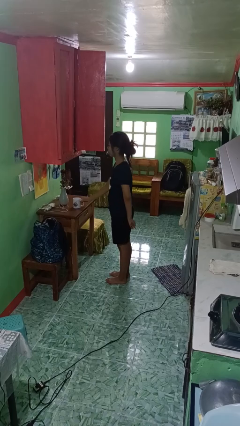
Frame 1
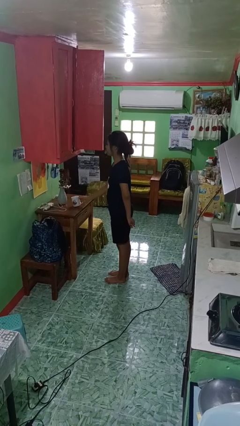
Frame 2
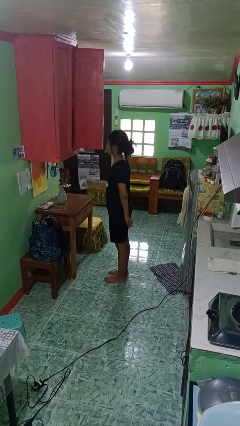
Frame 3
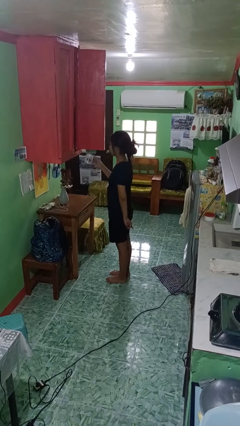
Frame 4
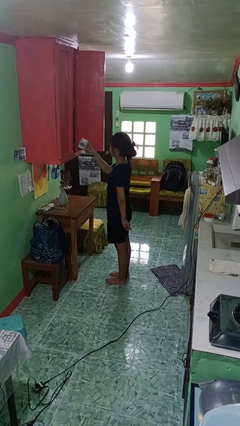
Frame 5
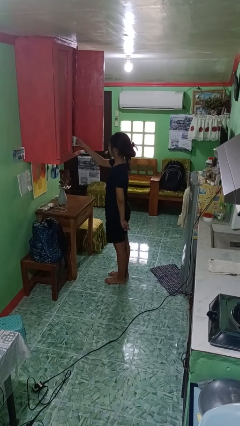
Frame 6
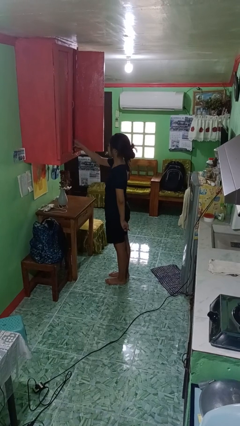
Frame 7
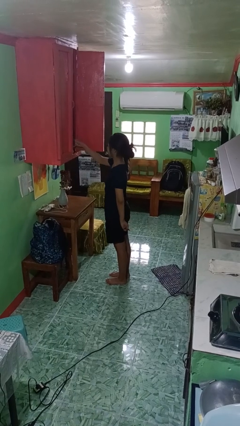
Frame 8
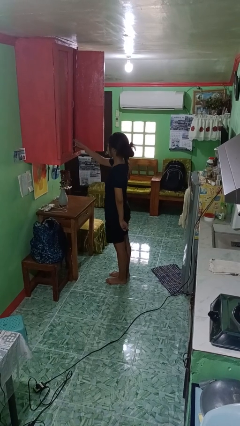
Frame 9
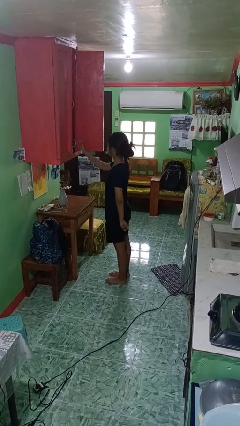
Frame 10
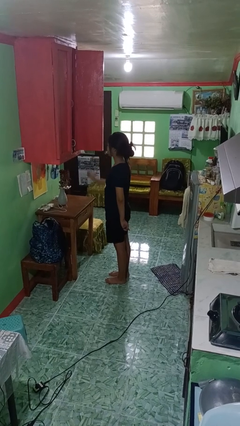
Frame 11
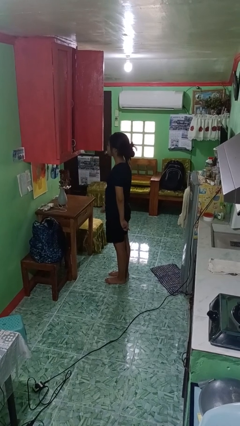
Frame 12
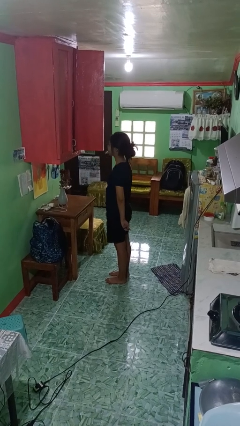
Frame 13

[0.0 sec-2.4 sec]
person puts object in cabinet

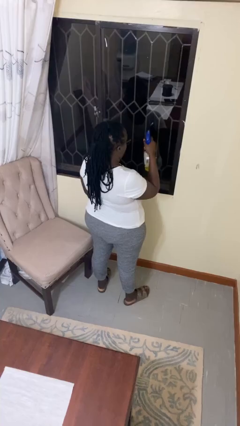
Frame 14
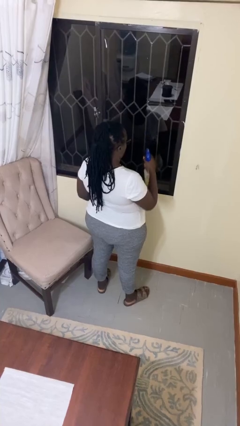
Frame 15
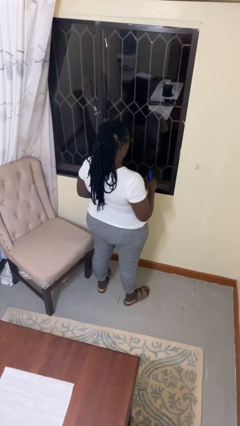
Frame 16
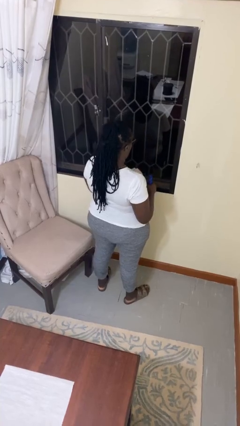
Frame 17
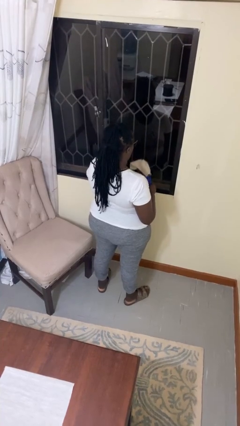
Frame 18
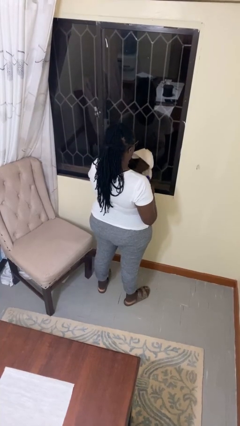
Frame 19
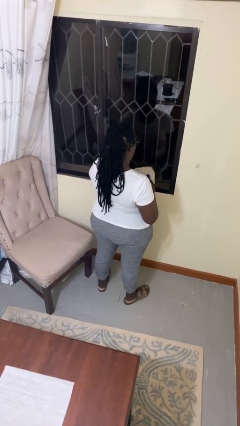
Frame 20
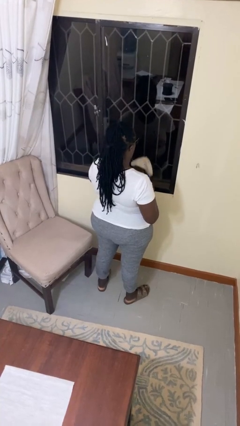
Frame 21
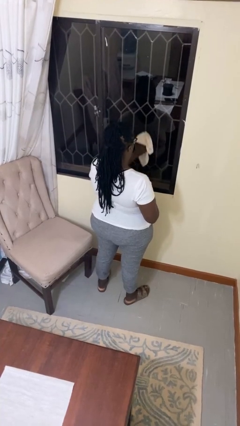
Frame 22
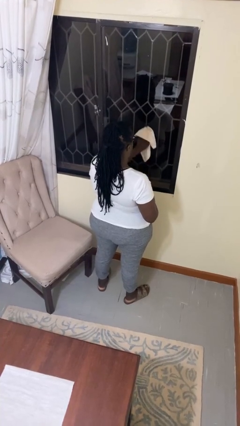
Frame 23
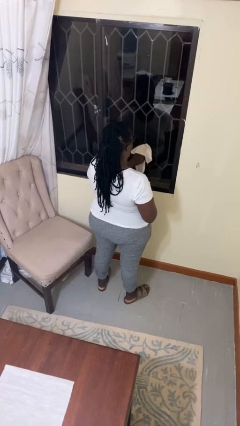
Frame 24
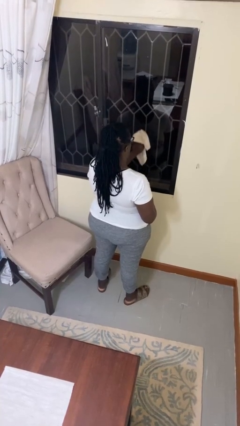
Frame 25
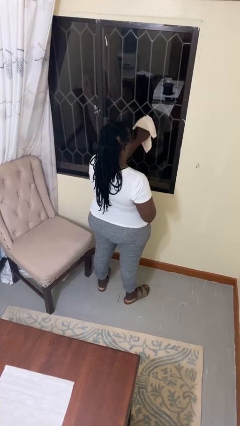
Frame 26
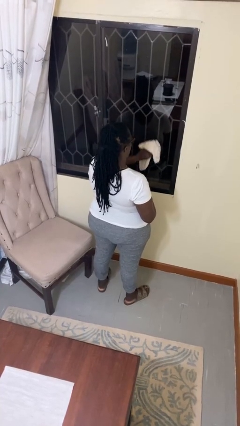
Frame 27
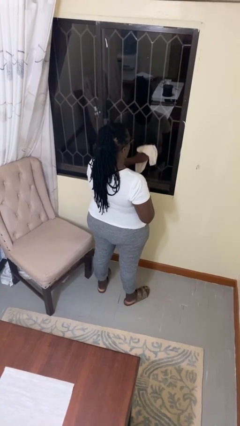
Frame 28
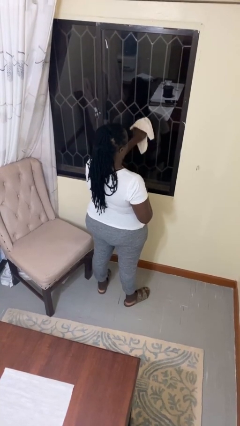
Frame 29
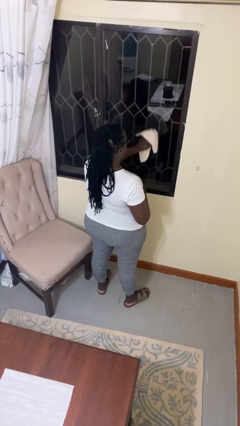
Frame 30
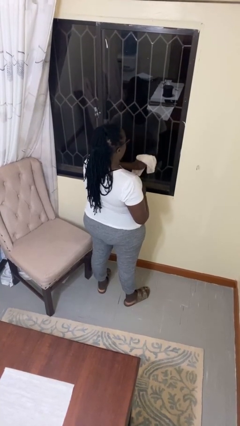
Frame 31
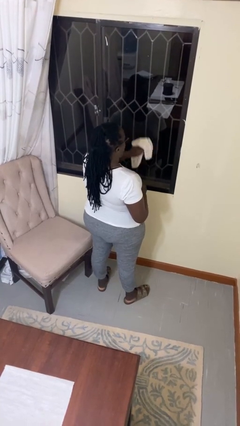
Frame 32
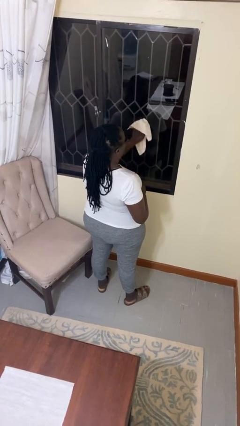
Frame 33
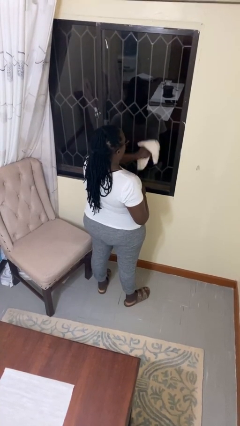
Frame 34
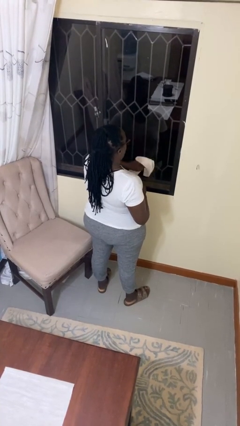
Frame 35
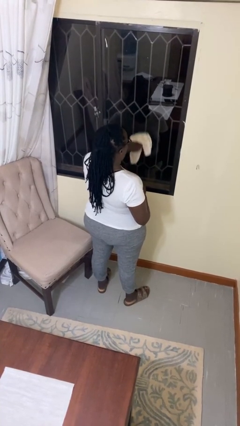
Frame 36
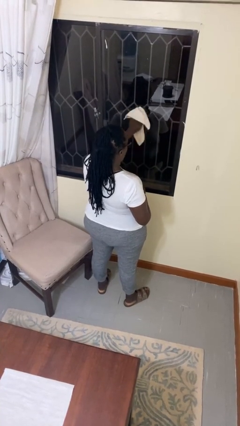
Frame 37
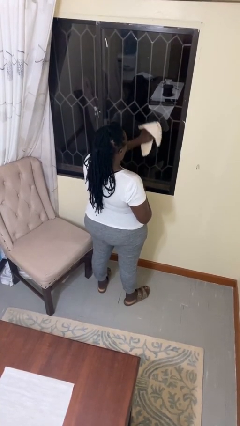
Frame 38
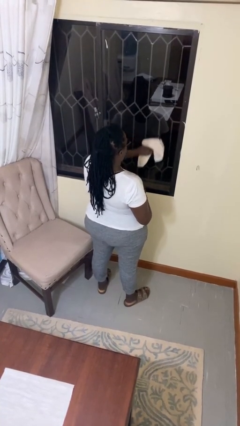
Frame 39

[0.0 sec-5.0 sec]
person washes window

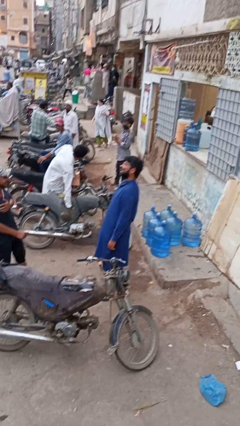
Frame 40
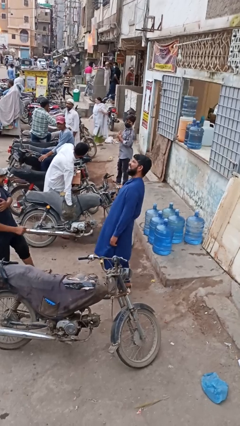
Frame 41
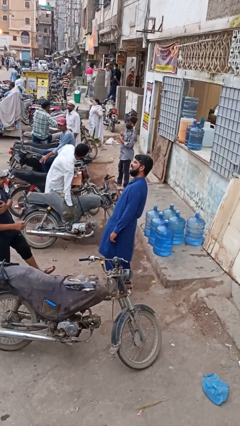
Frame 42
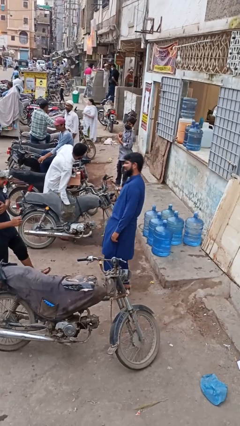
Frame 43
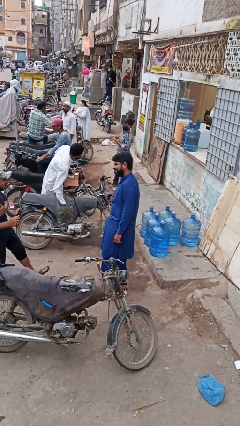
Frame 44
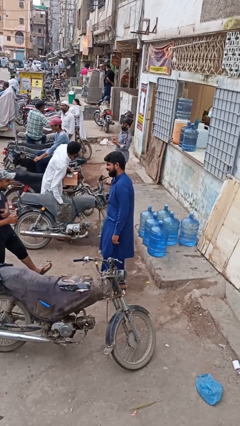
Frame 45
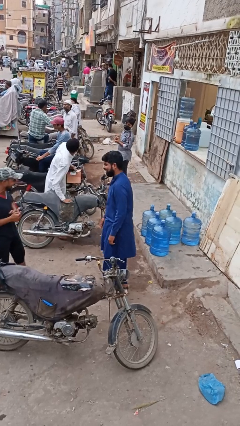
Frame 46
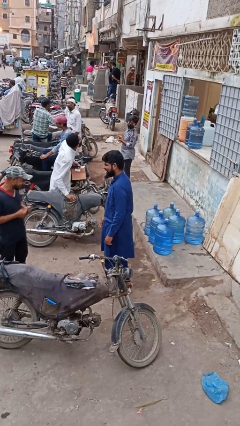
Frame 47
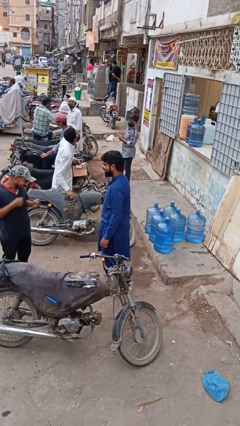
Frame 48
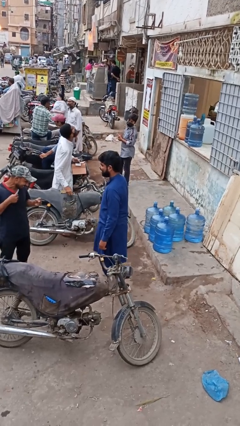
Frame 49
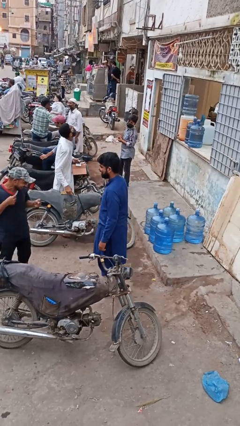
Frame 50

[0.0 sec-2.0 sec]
person laughs with person

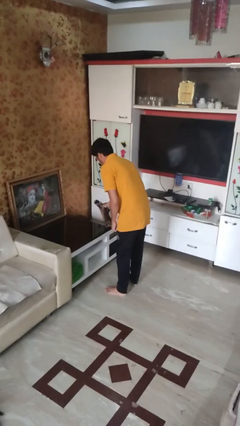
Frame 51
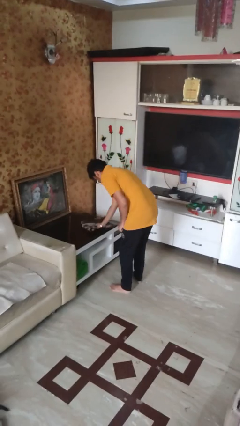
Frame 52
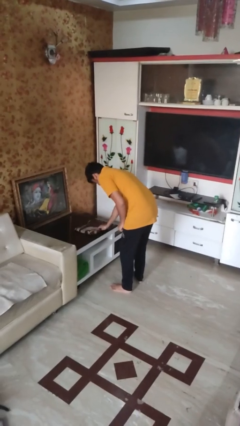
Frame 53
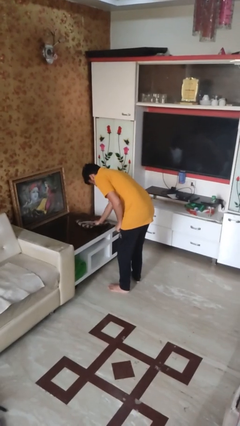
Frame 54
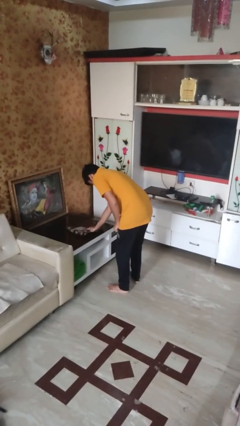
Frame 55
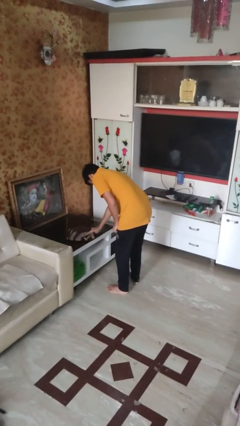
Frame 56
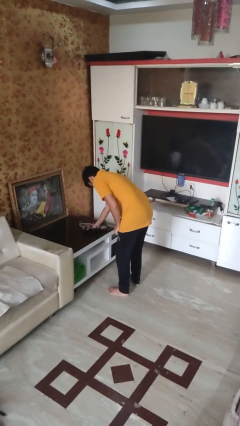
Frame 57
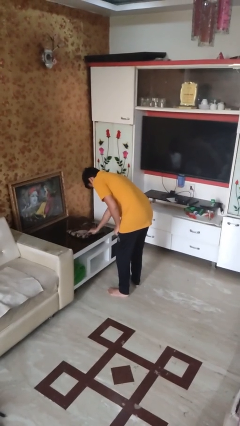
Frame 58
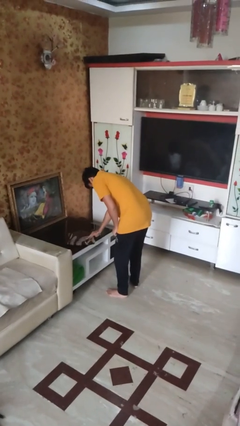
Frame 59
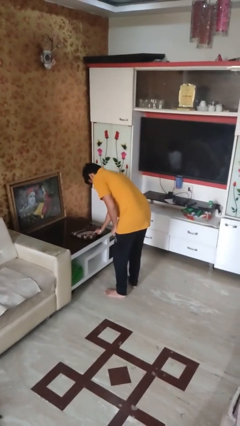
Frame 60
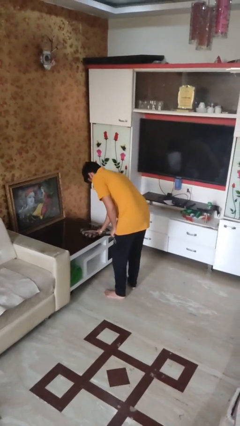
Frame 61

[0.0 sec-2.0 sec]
person cleans table with rag

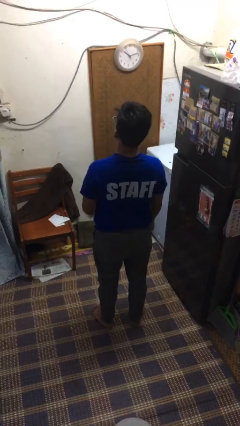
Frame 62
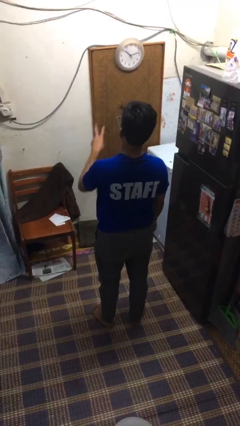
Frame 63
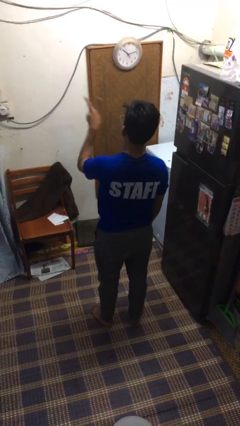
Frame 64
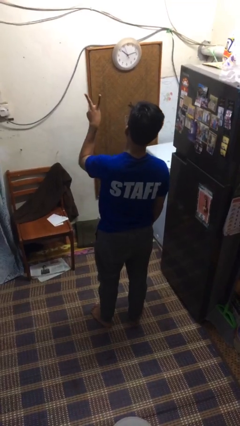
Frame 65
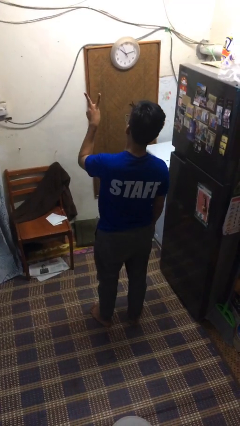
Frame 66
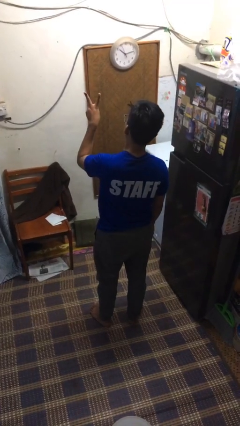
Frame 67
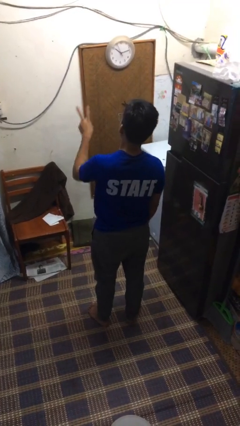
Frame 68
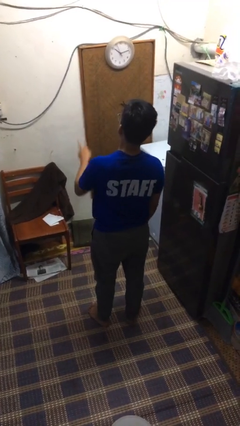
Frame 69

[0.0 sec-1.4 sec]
person gestures peace

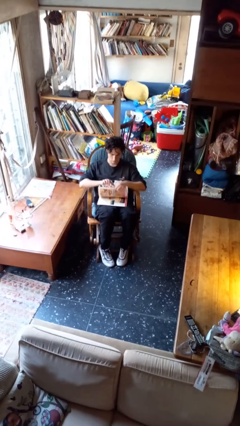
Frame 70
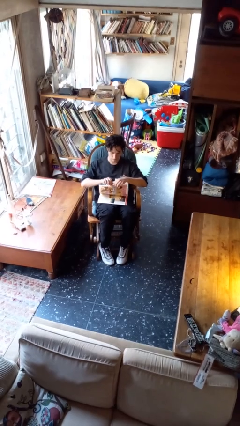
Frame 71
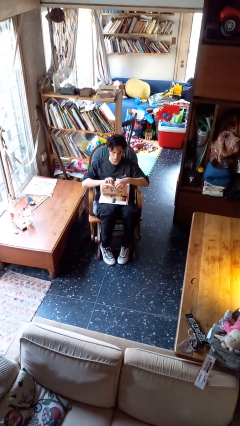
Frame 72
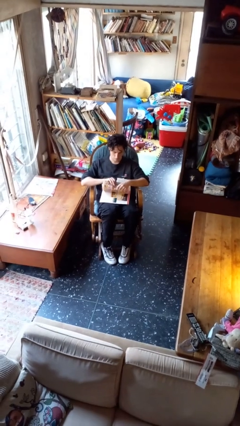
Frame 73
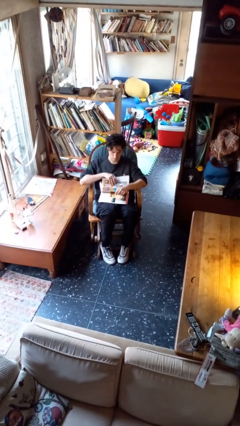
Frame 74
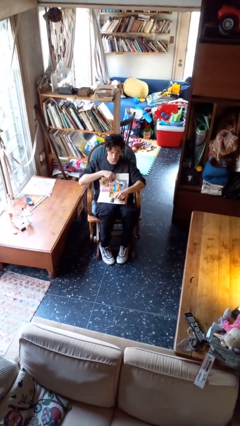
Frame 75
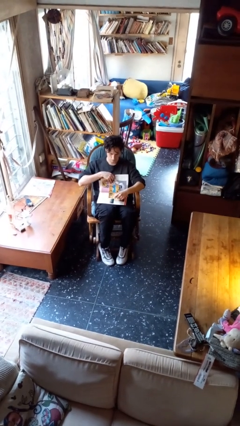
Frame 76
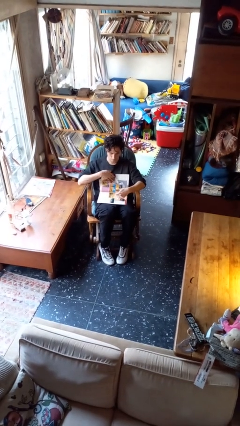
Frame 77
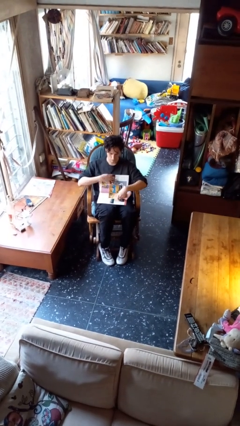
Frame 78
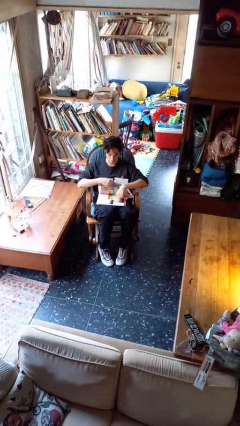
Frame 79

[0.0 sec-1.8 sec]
person tears paper

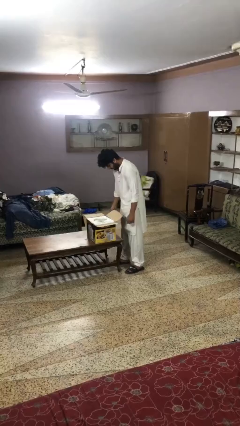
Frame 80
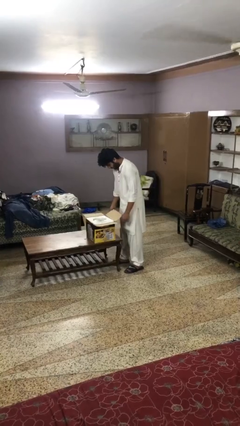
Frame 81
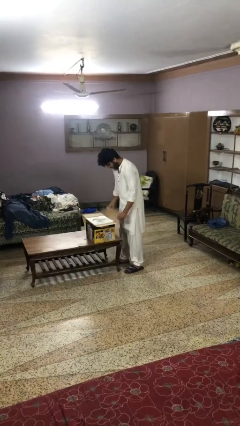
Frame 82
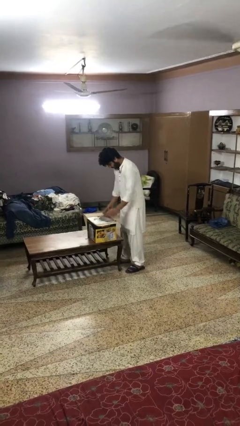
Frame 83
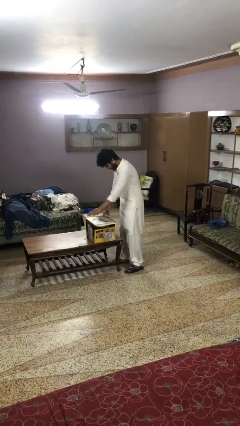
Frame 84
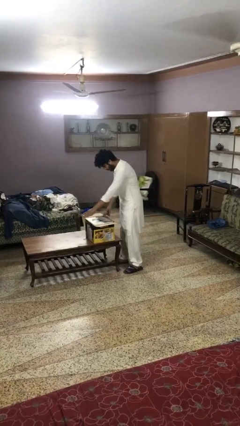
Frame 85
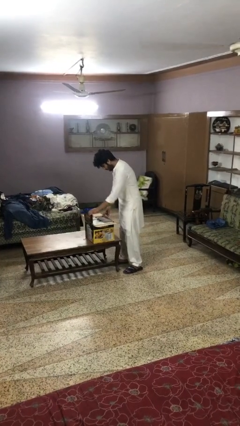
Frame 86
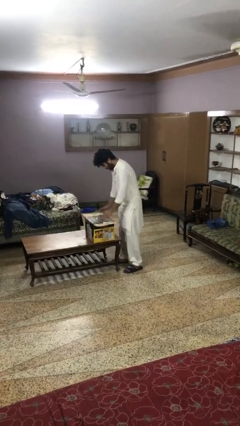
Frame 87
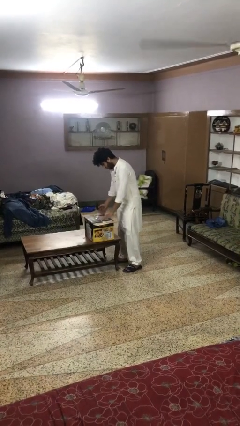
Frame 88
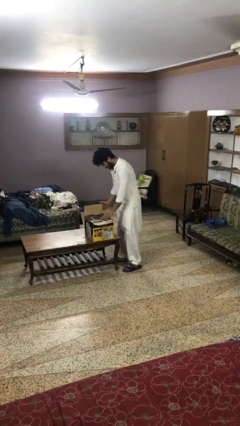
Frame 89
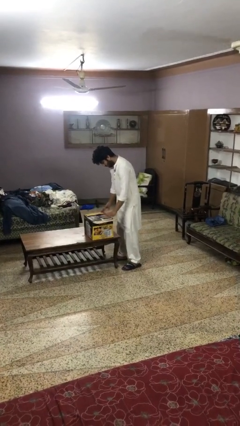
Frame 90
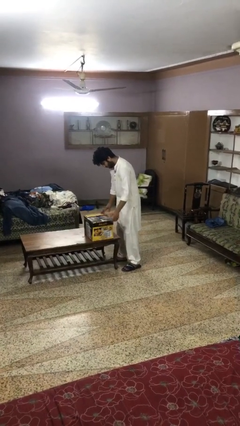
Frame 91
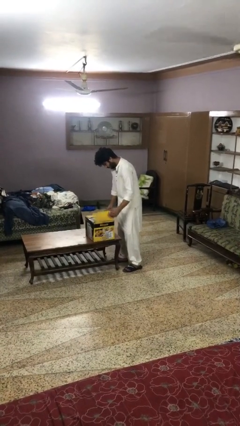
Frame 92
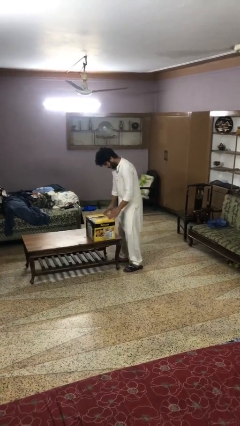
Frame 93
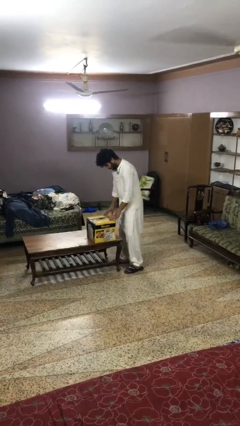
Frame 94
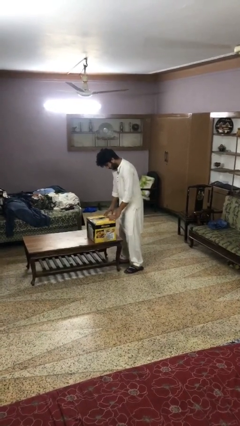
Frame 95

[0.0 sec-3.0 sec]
person closes box
